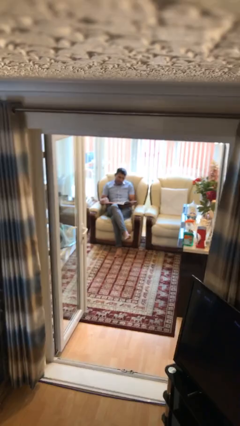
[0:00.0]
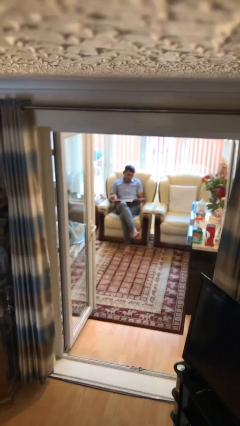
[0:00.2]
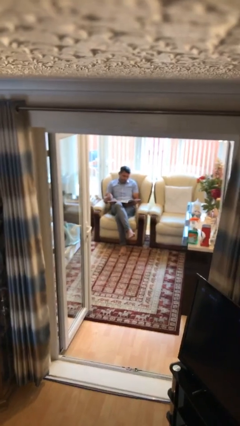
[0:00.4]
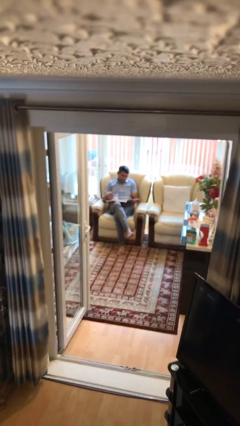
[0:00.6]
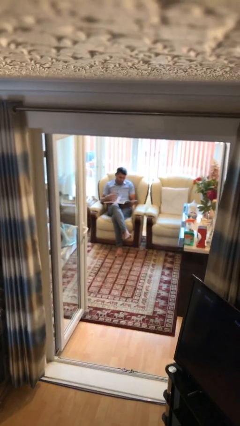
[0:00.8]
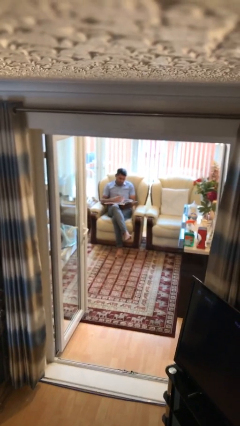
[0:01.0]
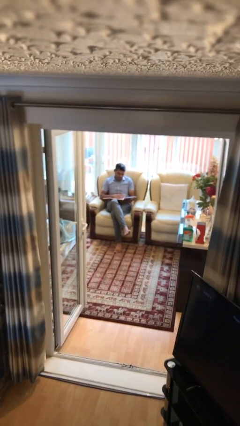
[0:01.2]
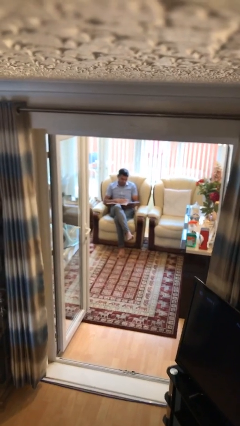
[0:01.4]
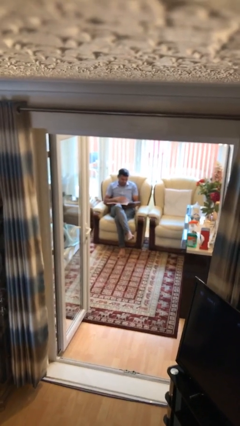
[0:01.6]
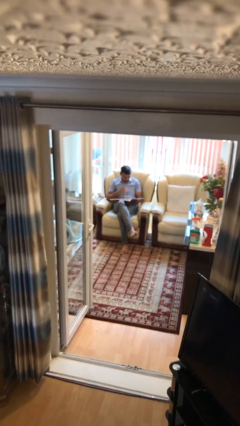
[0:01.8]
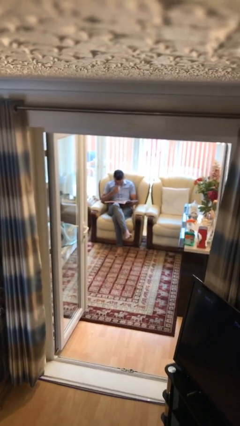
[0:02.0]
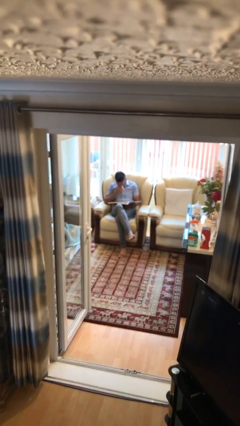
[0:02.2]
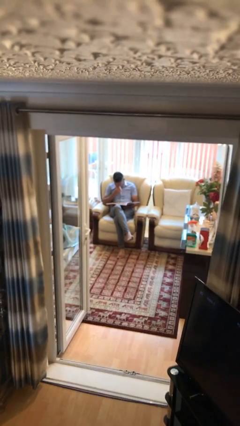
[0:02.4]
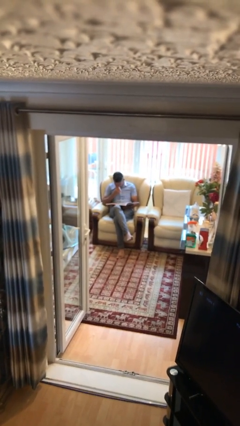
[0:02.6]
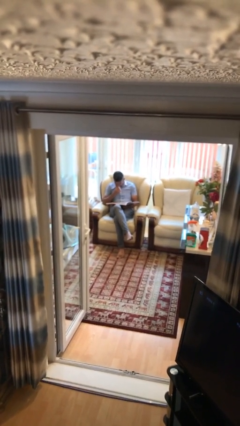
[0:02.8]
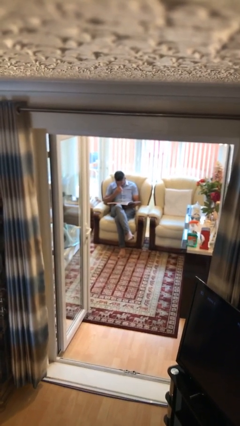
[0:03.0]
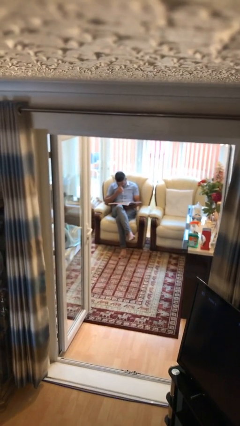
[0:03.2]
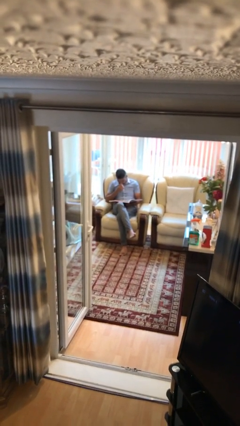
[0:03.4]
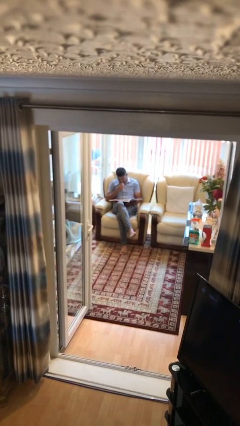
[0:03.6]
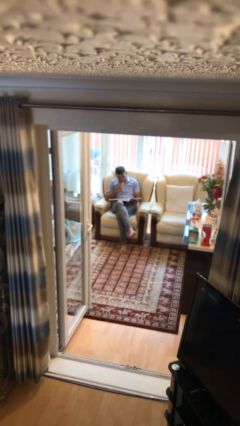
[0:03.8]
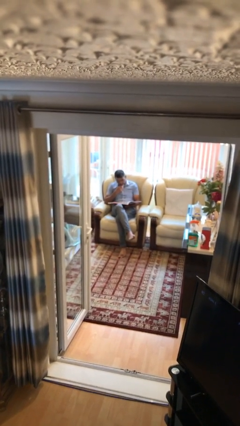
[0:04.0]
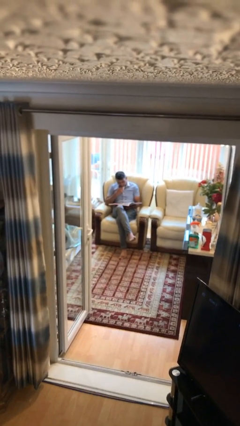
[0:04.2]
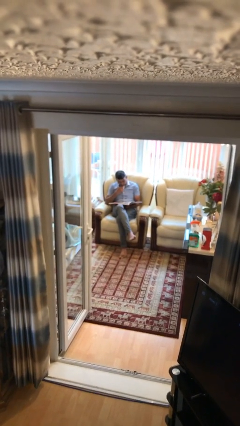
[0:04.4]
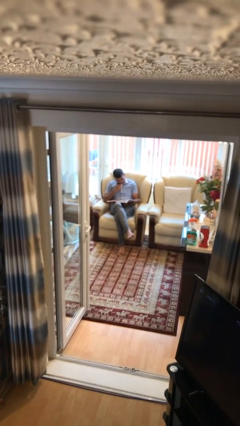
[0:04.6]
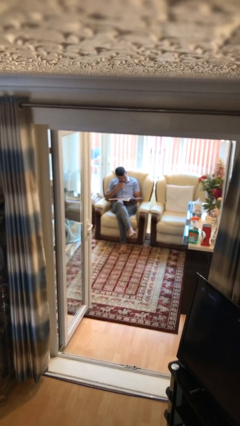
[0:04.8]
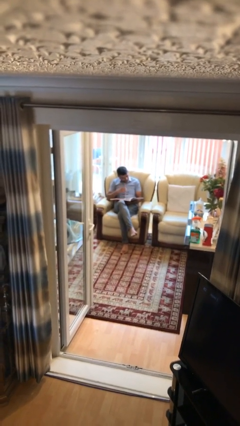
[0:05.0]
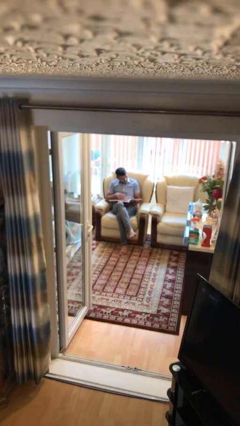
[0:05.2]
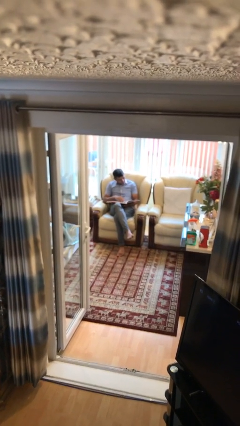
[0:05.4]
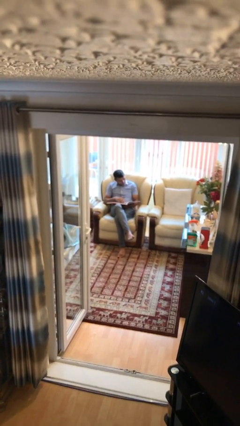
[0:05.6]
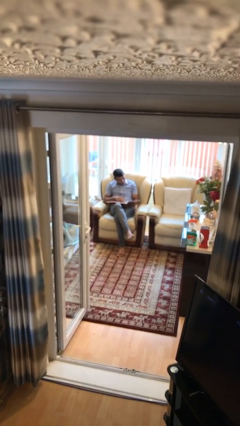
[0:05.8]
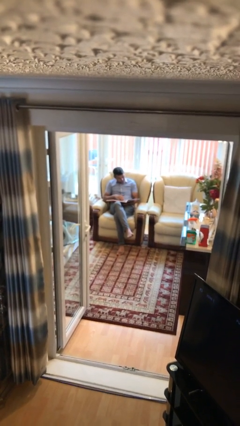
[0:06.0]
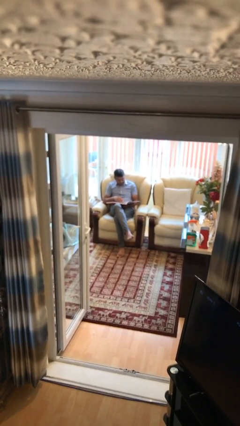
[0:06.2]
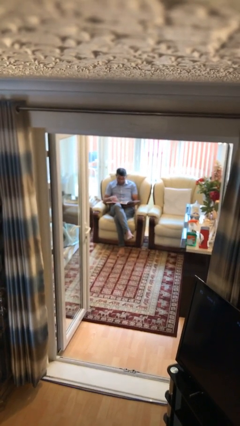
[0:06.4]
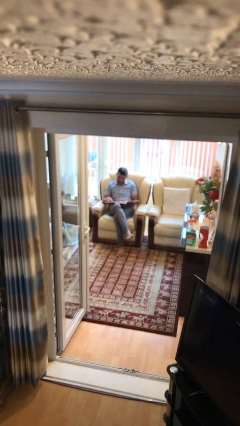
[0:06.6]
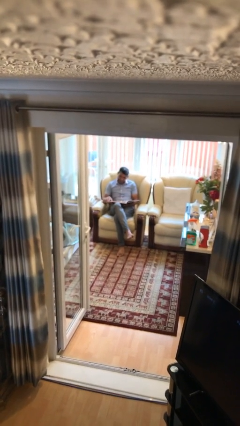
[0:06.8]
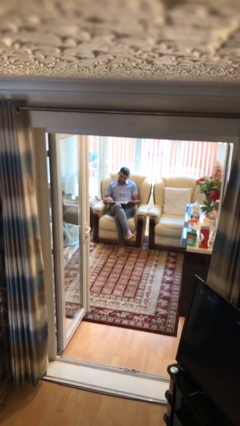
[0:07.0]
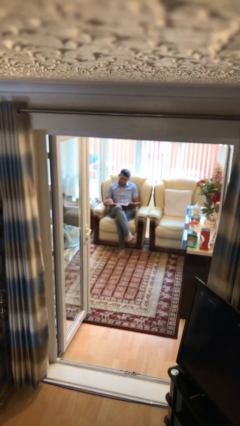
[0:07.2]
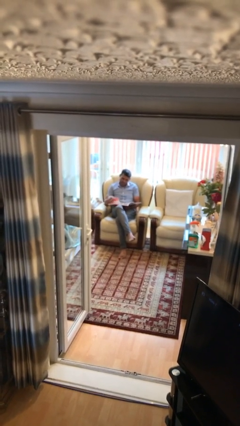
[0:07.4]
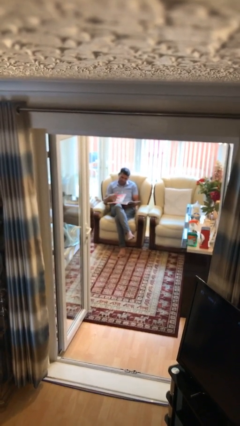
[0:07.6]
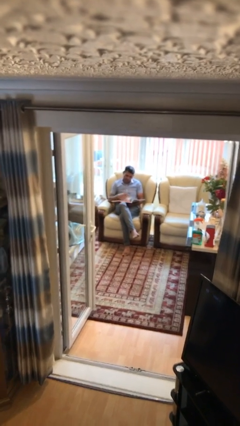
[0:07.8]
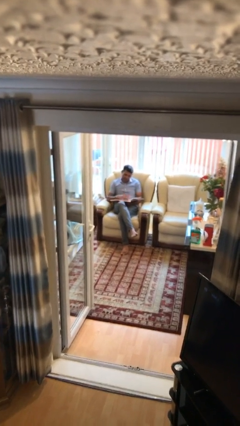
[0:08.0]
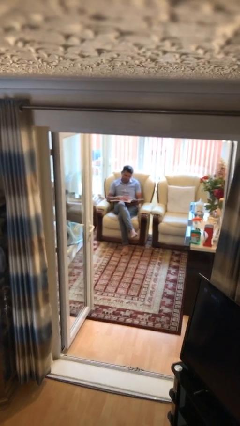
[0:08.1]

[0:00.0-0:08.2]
person reads document

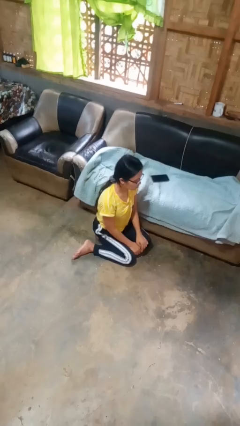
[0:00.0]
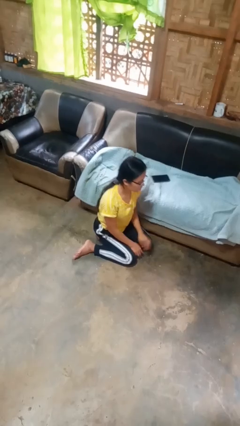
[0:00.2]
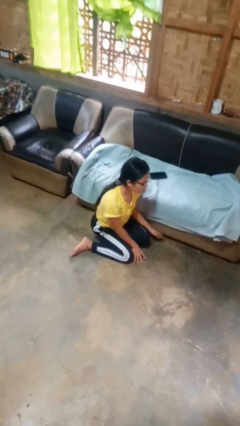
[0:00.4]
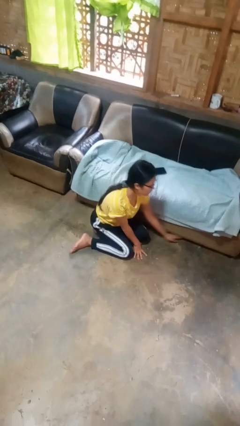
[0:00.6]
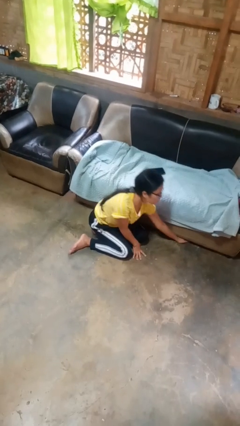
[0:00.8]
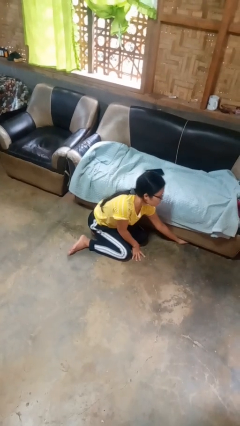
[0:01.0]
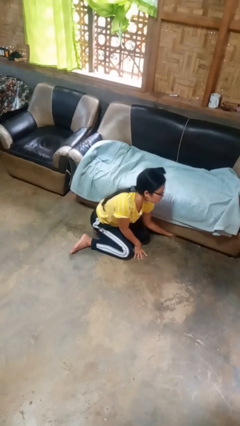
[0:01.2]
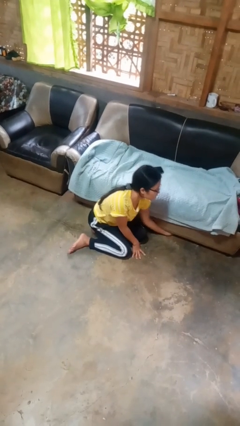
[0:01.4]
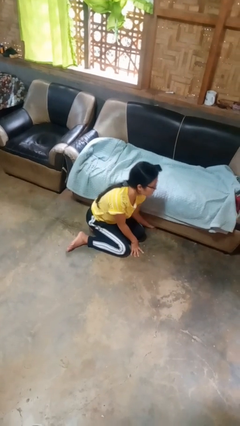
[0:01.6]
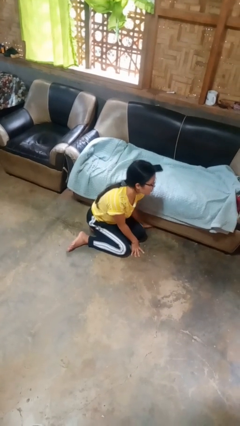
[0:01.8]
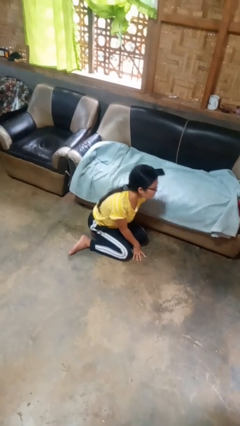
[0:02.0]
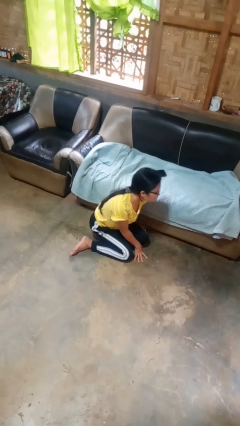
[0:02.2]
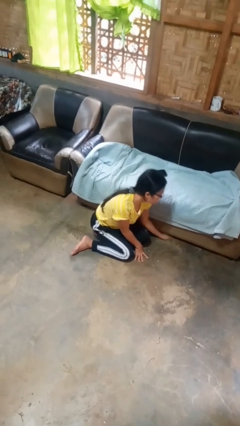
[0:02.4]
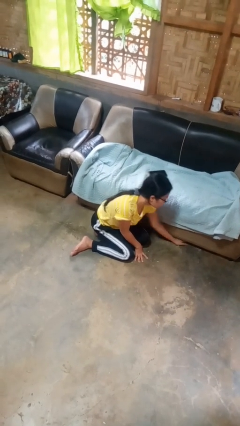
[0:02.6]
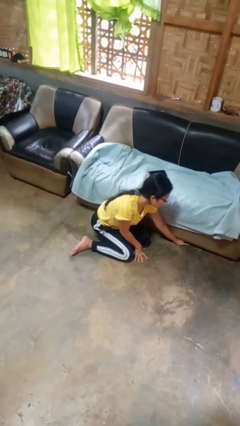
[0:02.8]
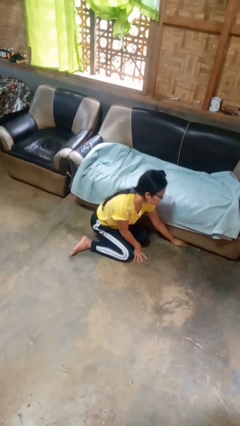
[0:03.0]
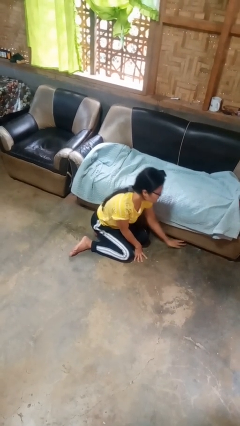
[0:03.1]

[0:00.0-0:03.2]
person searches under couch

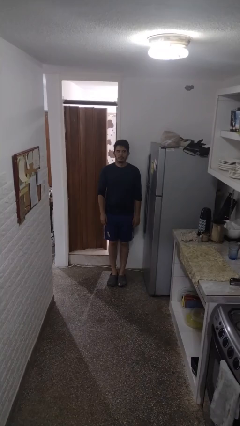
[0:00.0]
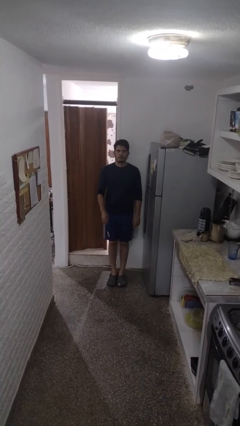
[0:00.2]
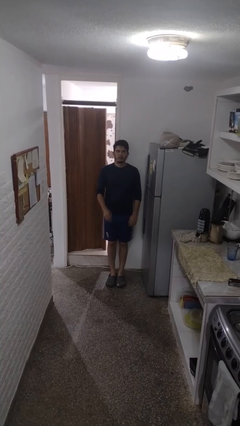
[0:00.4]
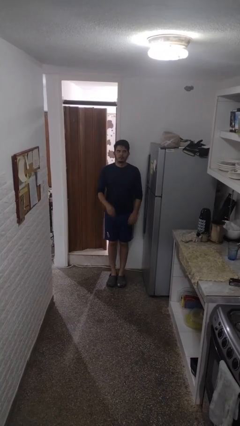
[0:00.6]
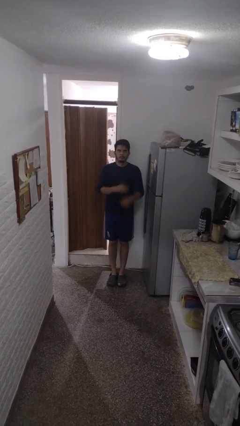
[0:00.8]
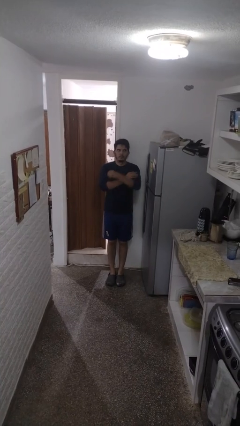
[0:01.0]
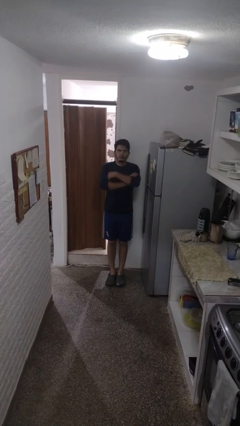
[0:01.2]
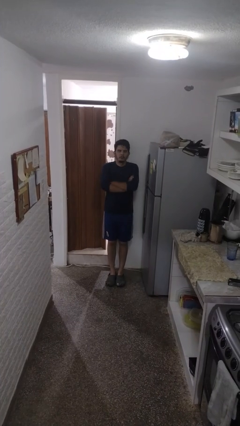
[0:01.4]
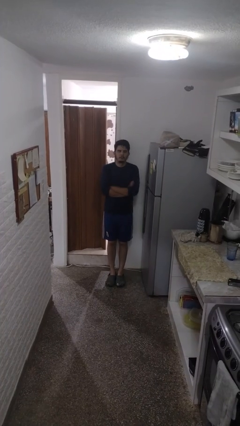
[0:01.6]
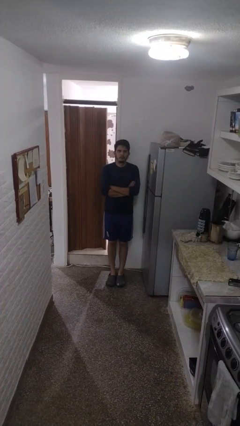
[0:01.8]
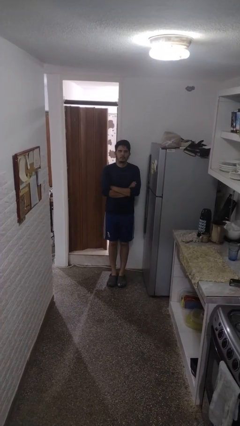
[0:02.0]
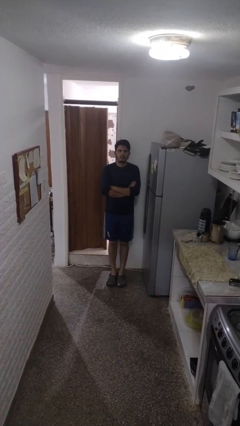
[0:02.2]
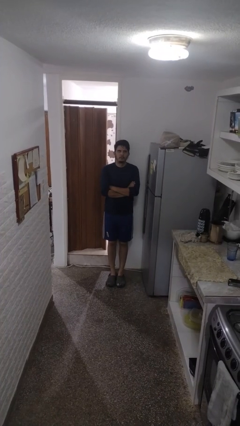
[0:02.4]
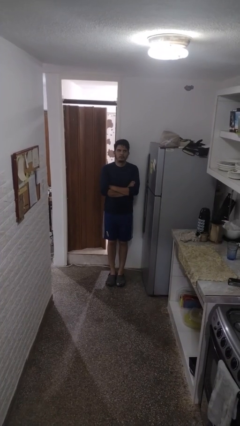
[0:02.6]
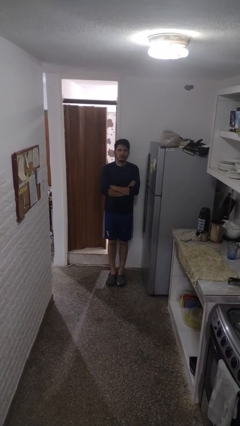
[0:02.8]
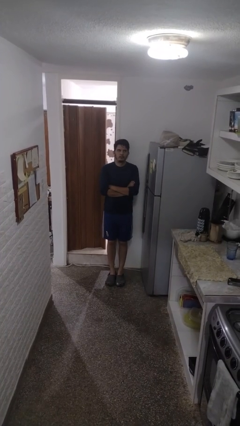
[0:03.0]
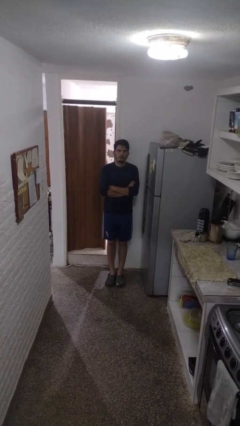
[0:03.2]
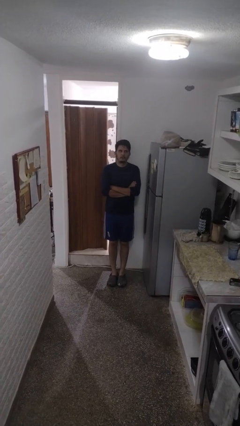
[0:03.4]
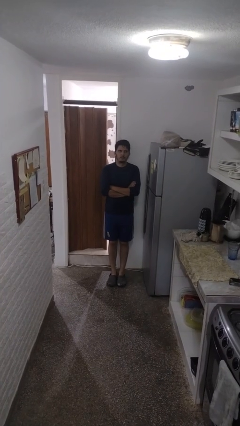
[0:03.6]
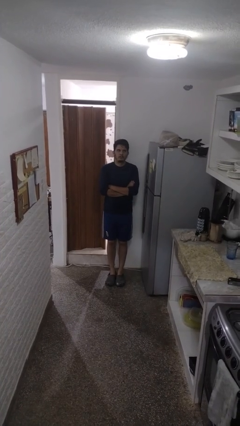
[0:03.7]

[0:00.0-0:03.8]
person crosses arms

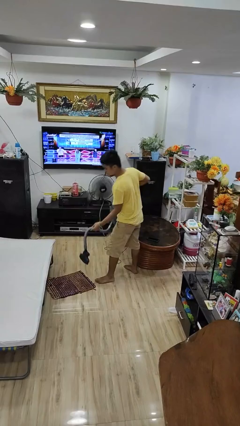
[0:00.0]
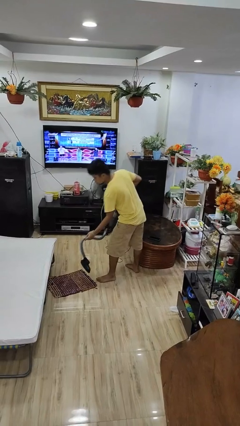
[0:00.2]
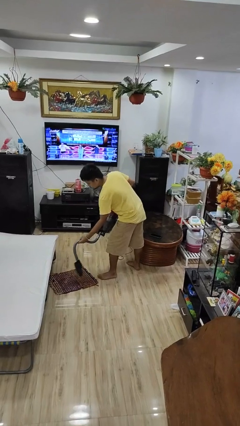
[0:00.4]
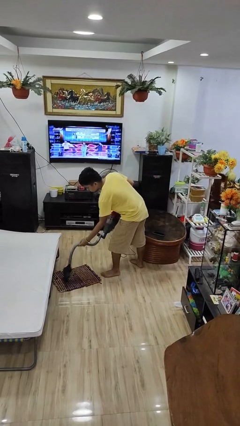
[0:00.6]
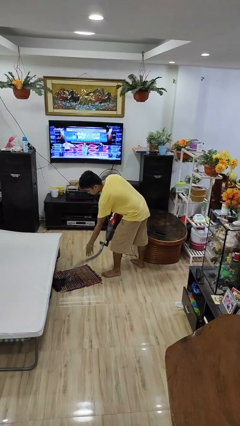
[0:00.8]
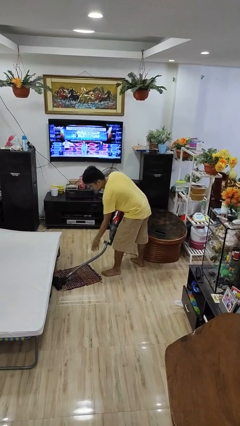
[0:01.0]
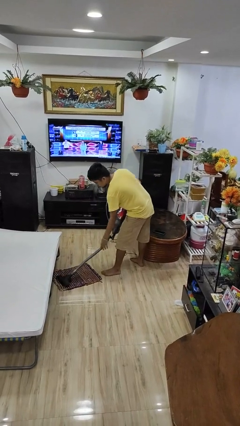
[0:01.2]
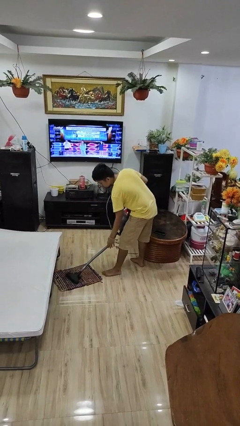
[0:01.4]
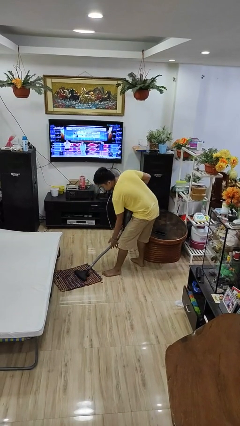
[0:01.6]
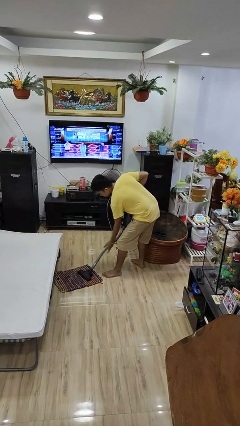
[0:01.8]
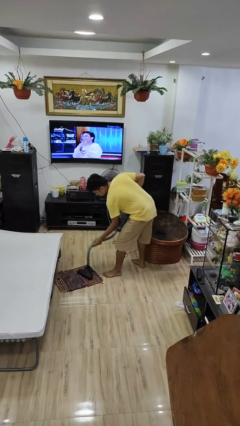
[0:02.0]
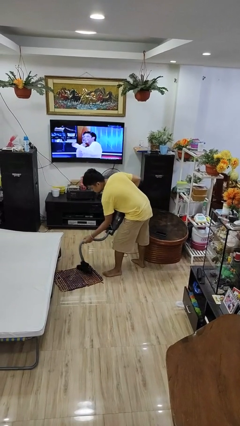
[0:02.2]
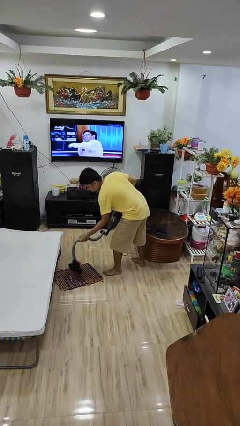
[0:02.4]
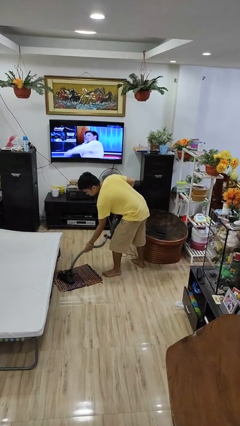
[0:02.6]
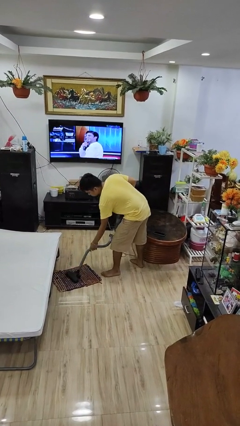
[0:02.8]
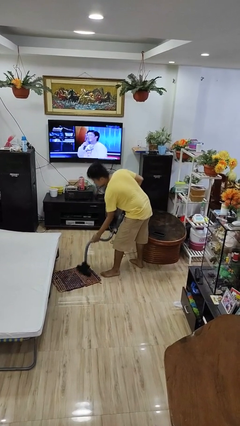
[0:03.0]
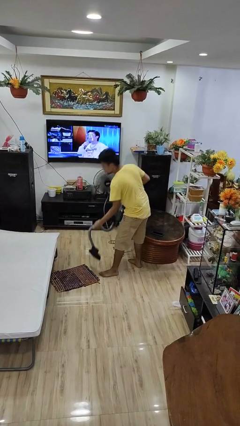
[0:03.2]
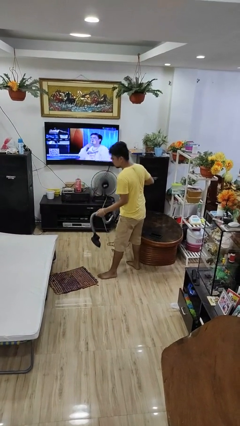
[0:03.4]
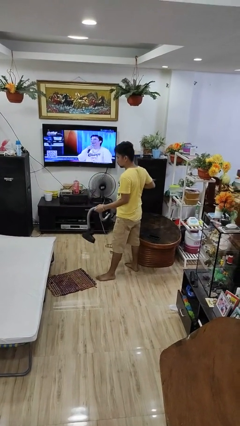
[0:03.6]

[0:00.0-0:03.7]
person vacuums carpet
